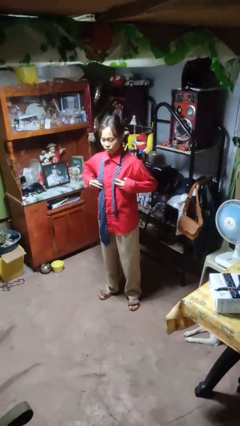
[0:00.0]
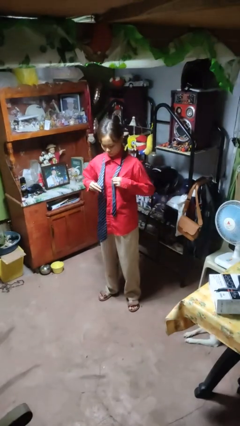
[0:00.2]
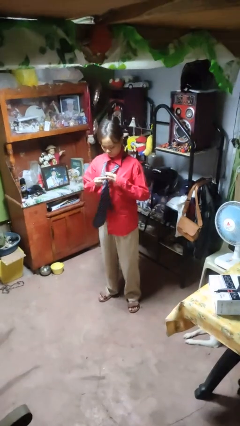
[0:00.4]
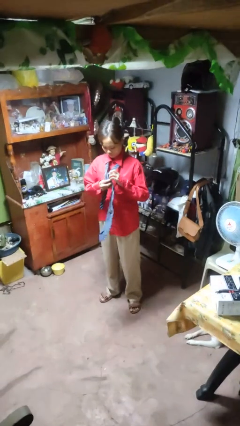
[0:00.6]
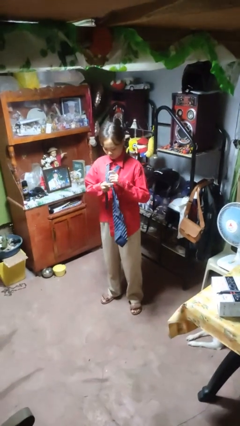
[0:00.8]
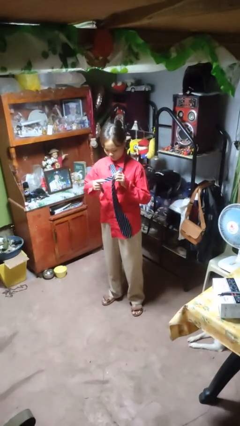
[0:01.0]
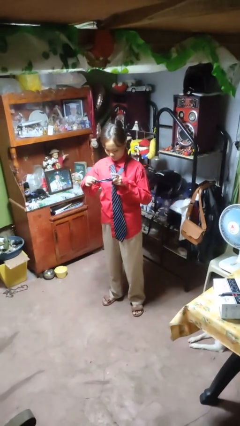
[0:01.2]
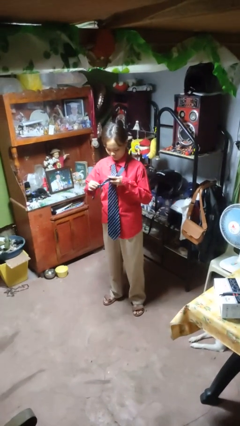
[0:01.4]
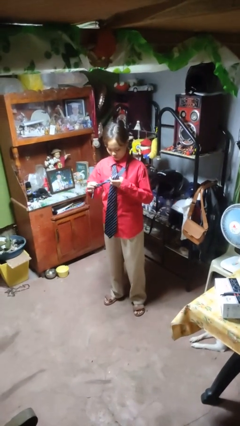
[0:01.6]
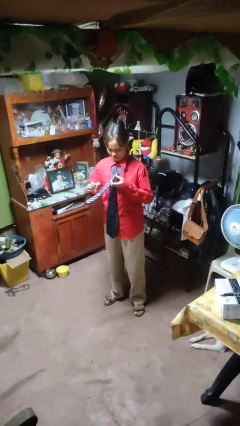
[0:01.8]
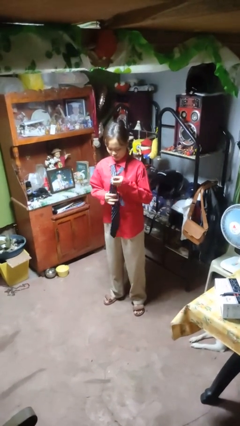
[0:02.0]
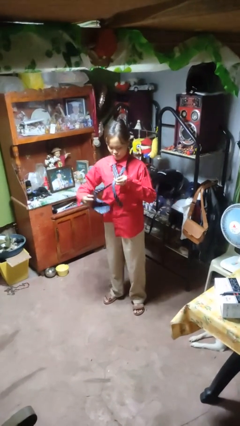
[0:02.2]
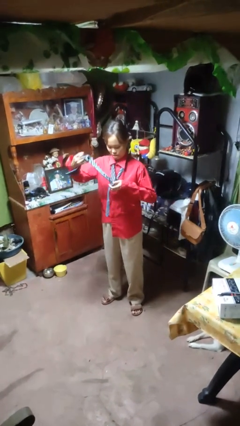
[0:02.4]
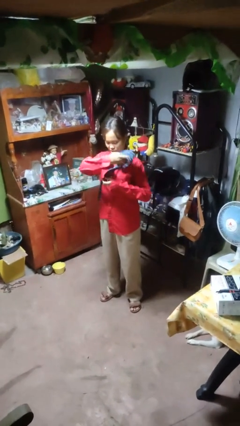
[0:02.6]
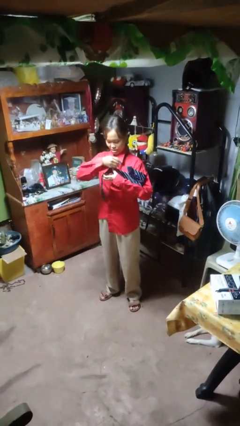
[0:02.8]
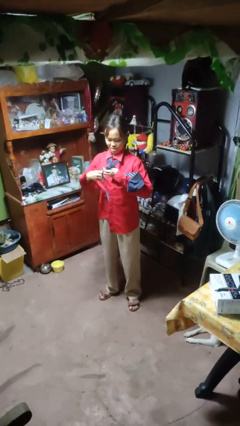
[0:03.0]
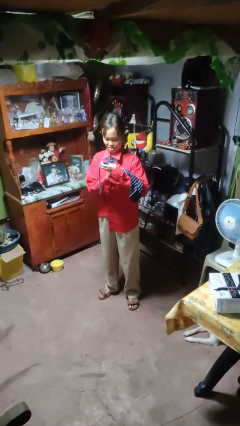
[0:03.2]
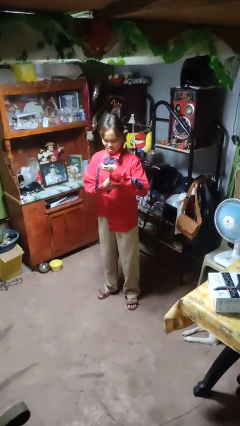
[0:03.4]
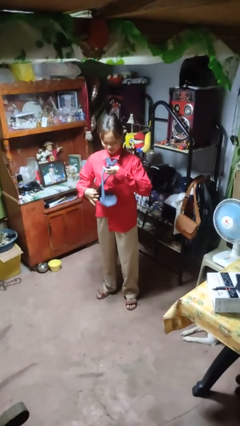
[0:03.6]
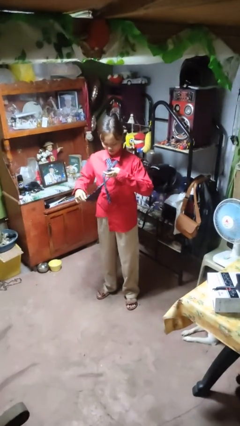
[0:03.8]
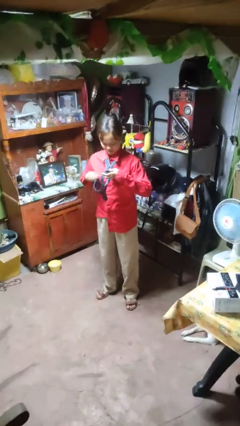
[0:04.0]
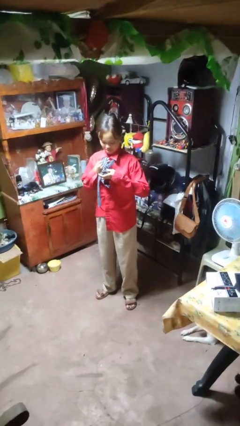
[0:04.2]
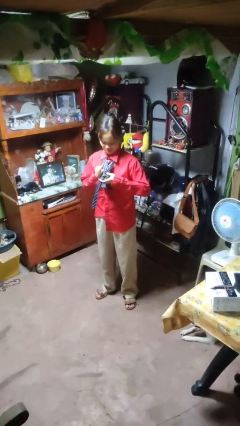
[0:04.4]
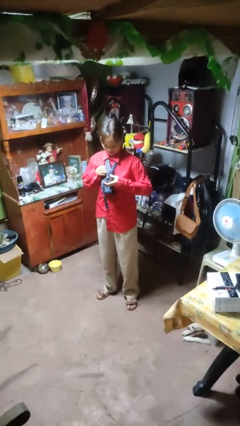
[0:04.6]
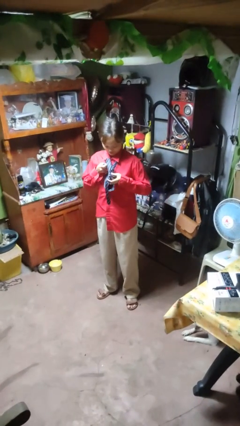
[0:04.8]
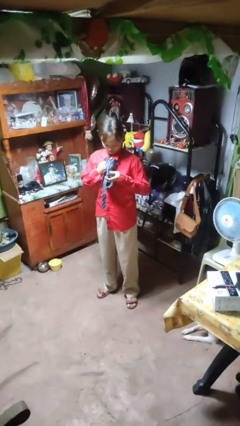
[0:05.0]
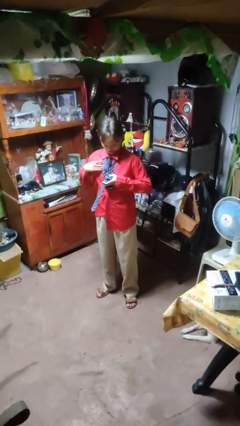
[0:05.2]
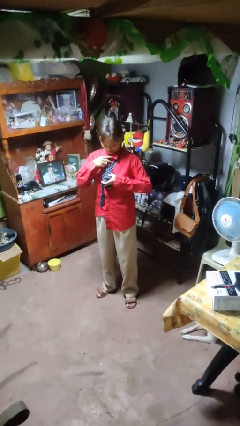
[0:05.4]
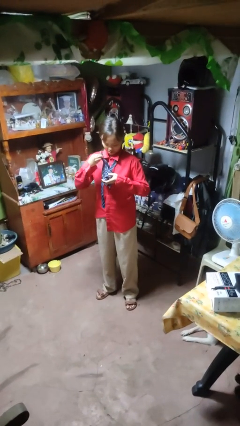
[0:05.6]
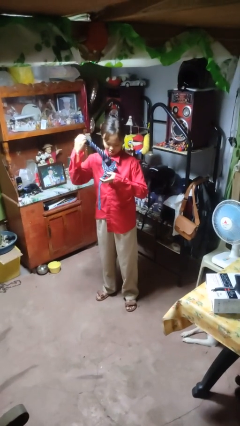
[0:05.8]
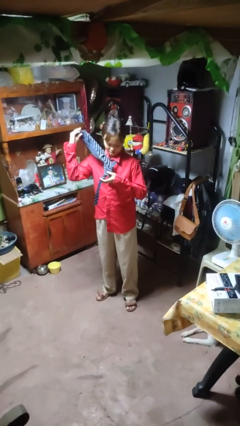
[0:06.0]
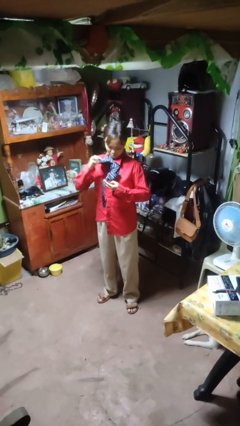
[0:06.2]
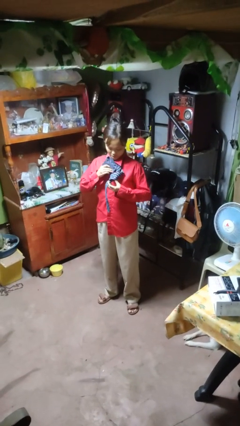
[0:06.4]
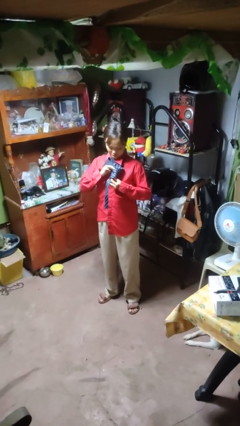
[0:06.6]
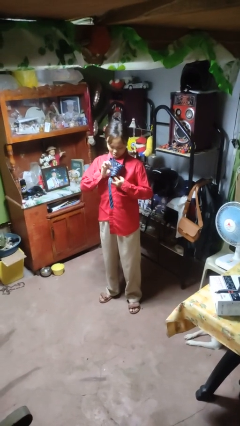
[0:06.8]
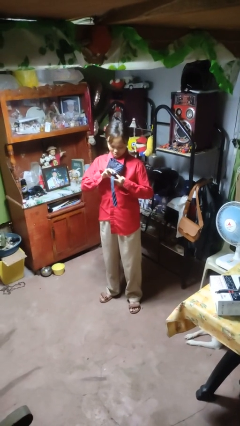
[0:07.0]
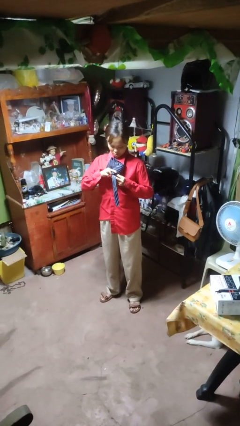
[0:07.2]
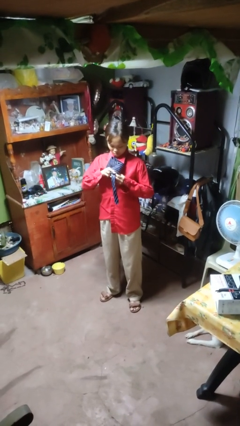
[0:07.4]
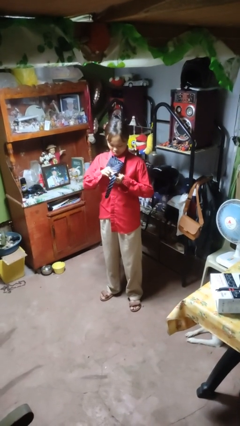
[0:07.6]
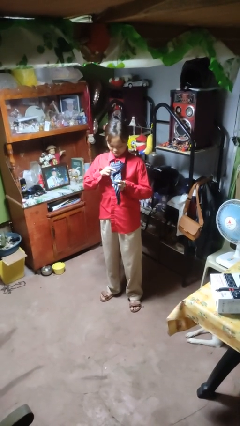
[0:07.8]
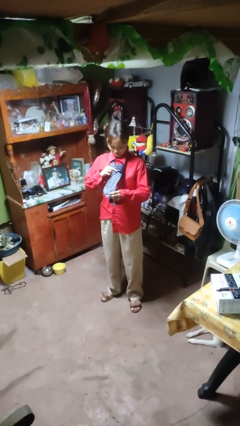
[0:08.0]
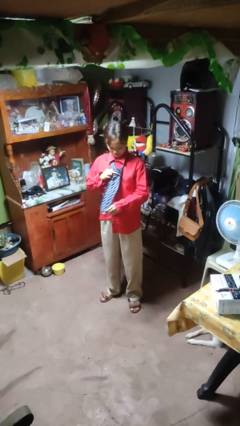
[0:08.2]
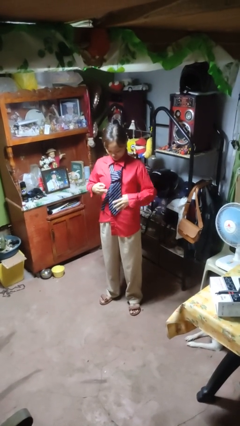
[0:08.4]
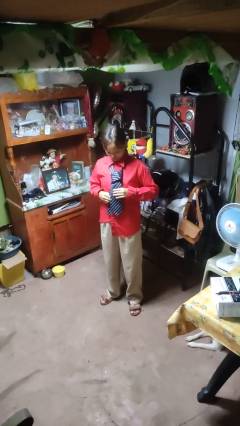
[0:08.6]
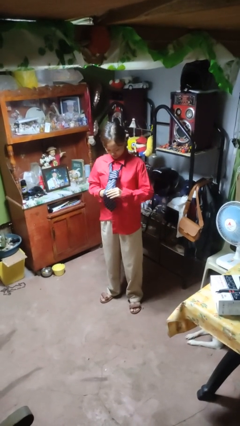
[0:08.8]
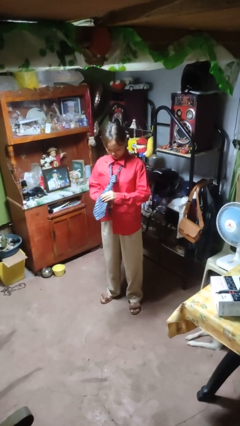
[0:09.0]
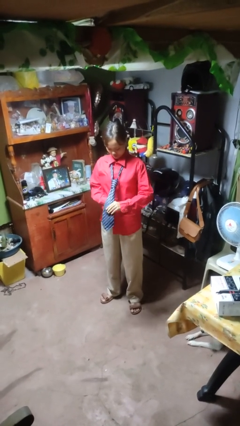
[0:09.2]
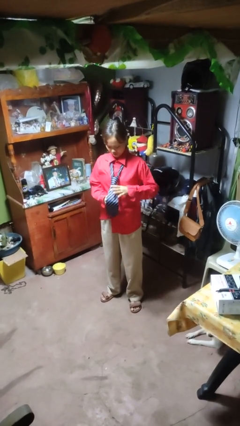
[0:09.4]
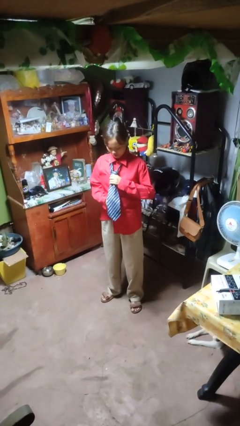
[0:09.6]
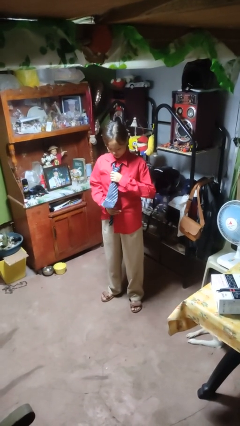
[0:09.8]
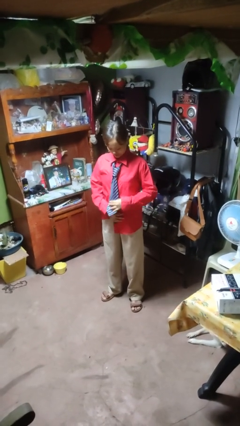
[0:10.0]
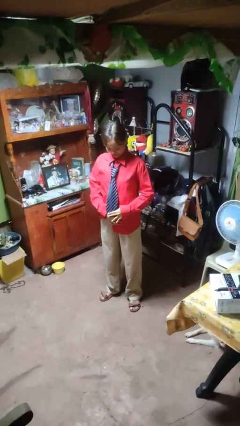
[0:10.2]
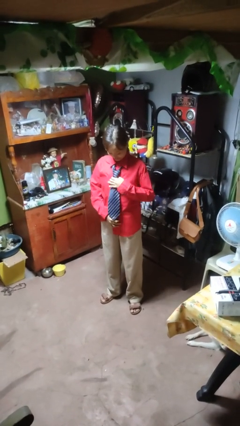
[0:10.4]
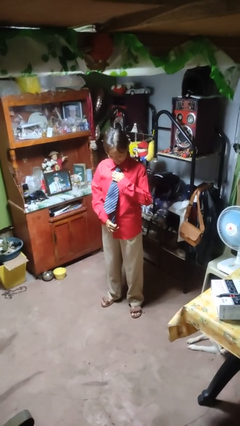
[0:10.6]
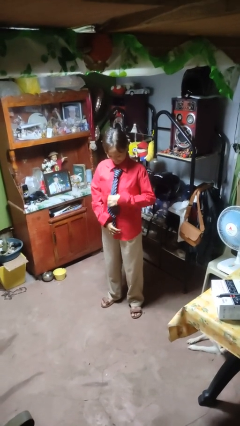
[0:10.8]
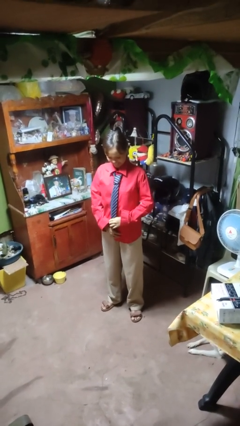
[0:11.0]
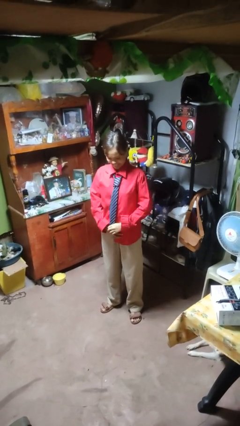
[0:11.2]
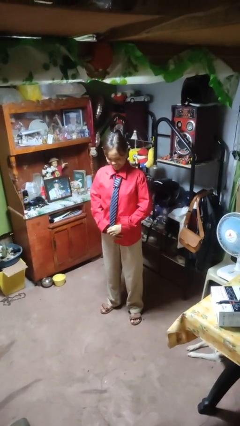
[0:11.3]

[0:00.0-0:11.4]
person puts on necktie

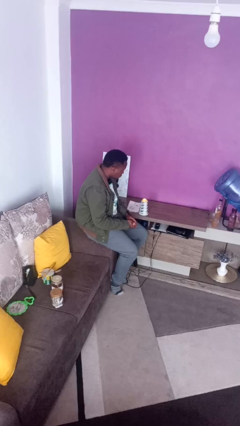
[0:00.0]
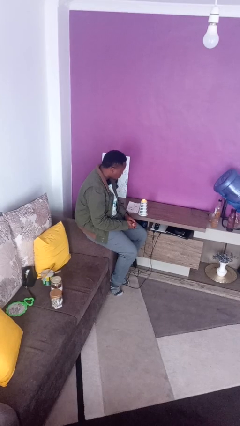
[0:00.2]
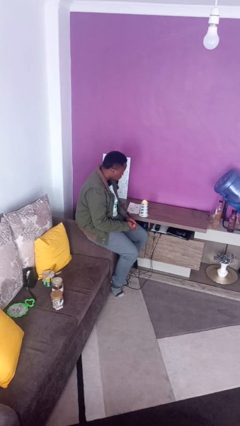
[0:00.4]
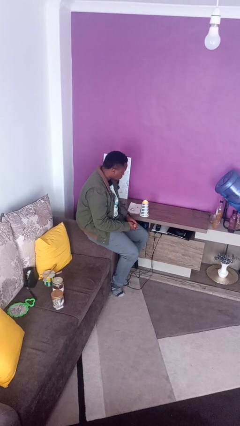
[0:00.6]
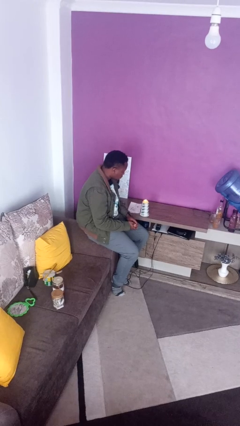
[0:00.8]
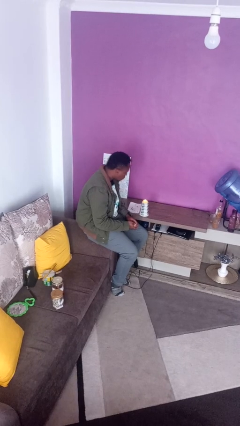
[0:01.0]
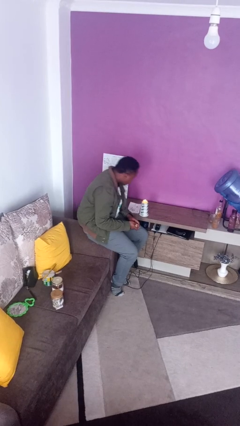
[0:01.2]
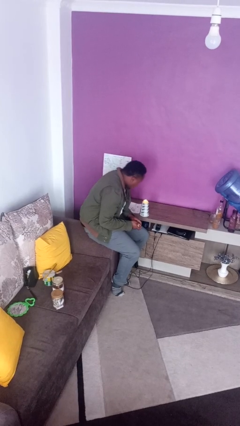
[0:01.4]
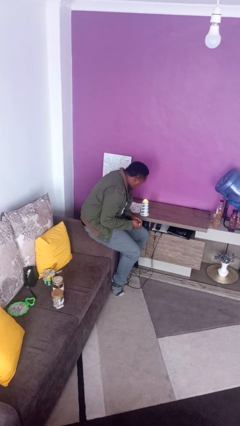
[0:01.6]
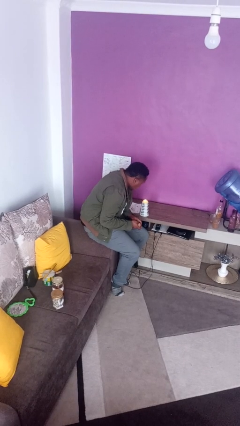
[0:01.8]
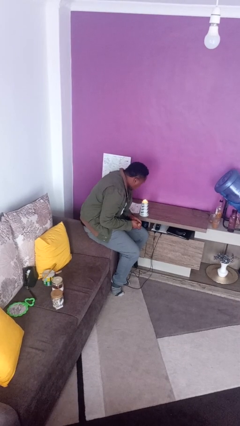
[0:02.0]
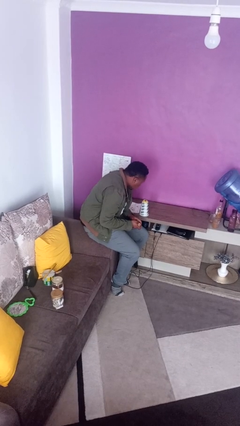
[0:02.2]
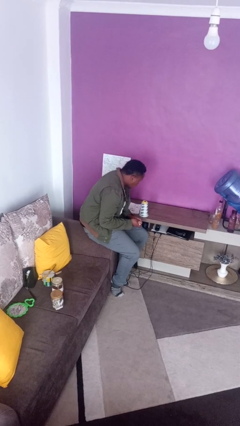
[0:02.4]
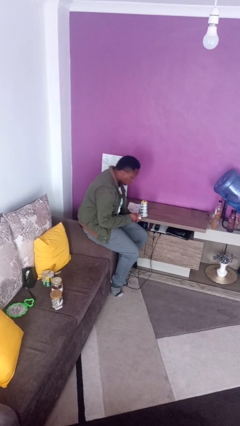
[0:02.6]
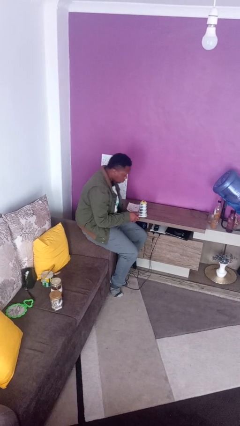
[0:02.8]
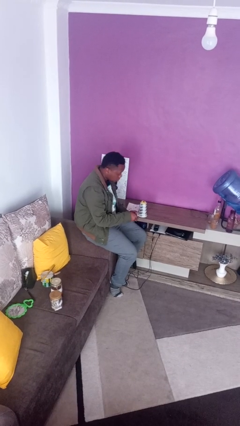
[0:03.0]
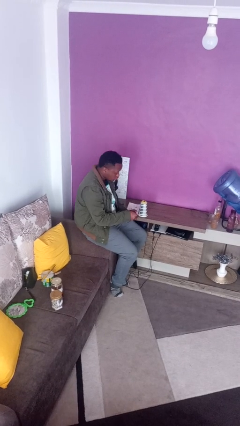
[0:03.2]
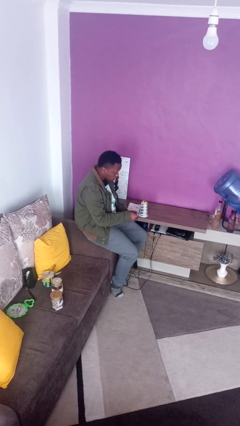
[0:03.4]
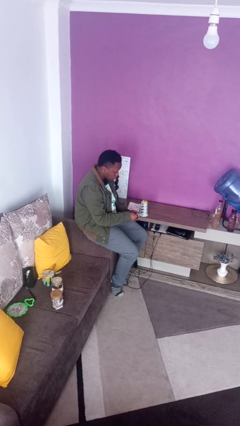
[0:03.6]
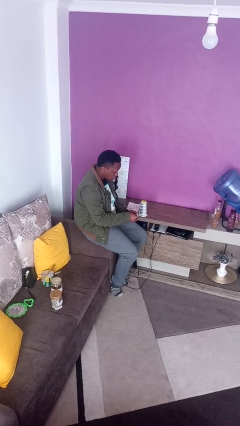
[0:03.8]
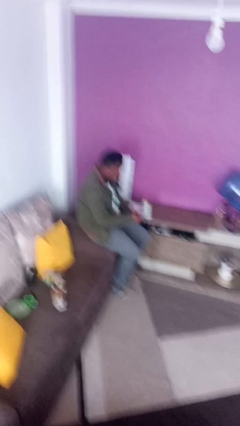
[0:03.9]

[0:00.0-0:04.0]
person extinguishes candle

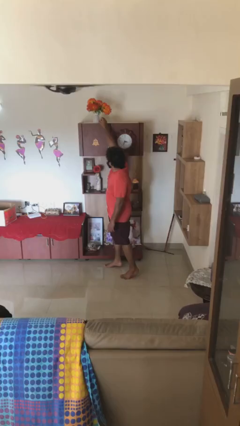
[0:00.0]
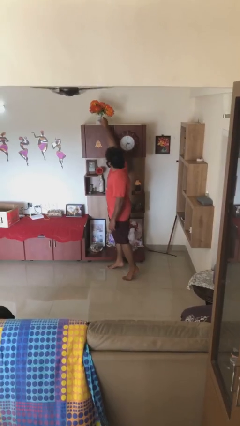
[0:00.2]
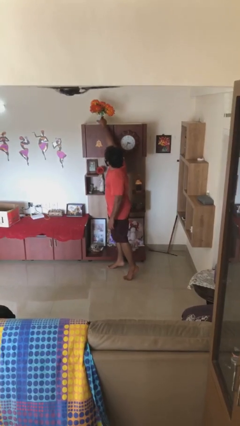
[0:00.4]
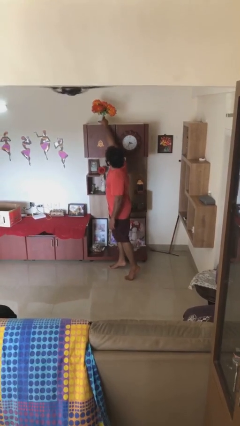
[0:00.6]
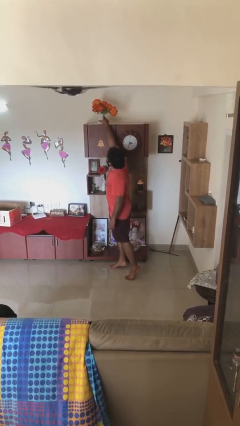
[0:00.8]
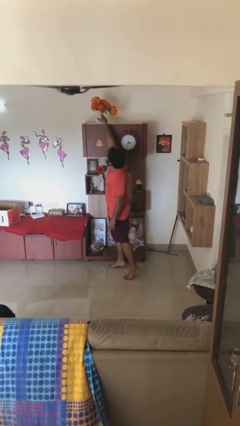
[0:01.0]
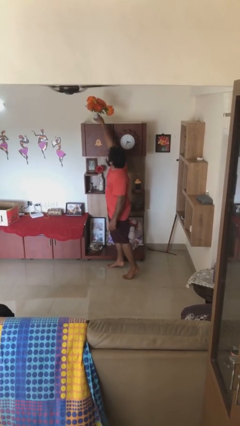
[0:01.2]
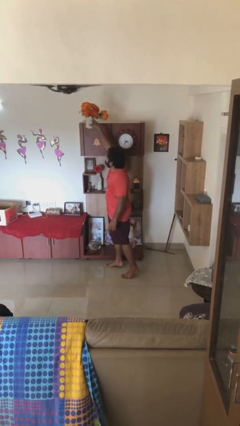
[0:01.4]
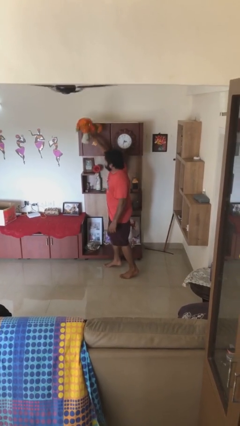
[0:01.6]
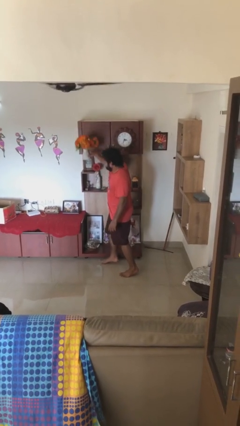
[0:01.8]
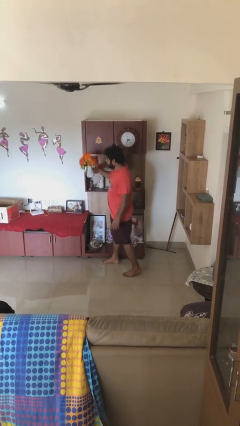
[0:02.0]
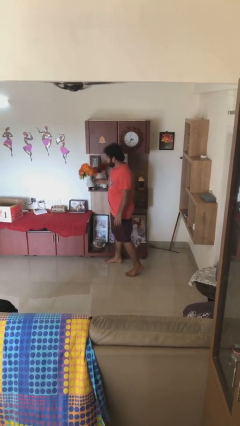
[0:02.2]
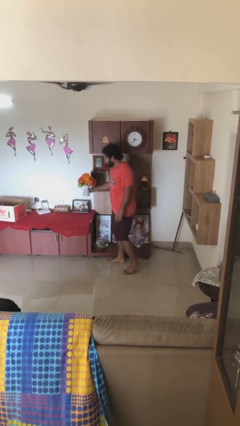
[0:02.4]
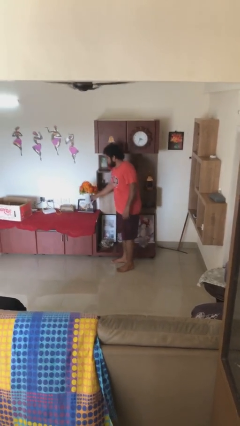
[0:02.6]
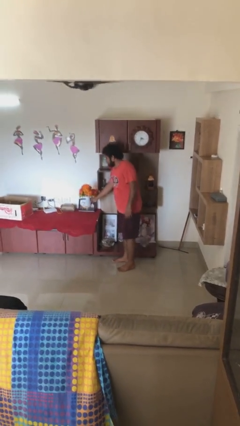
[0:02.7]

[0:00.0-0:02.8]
person picks up object from shelf
